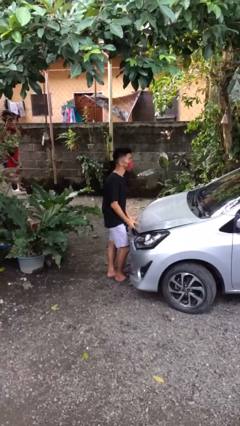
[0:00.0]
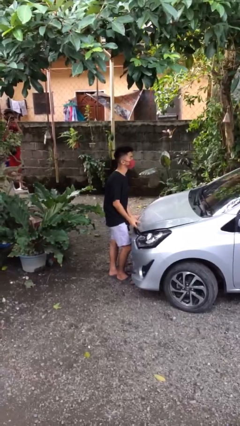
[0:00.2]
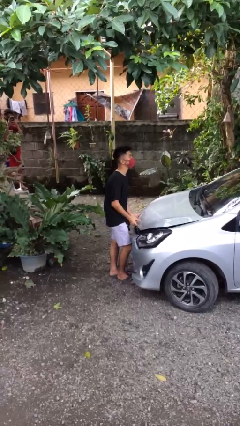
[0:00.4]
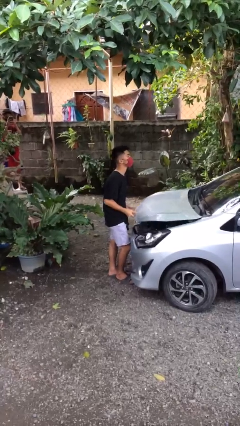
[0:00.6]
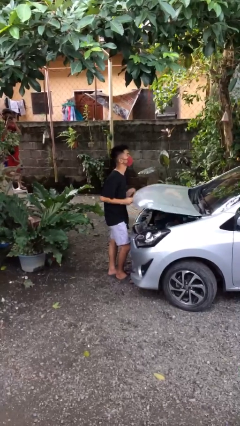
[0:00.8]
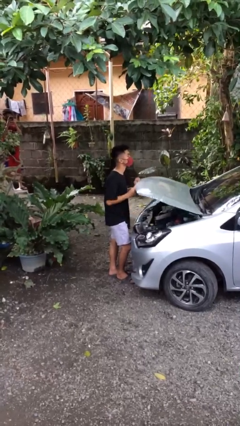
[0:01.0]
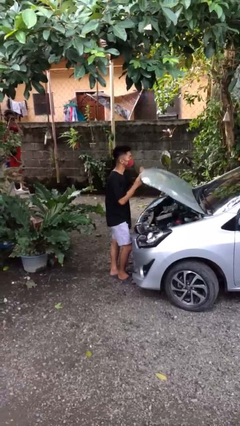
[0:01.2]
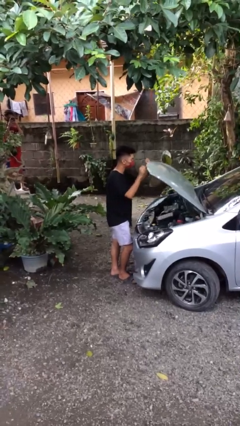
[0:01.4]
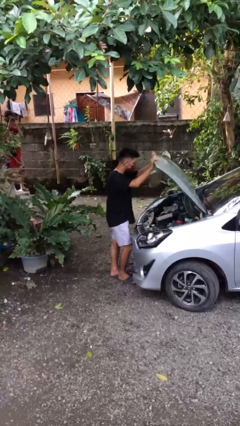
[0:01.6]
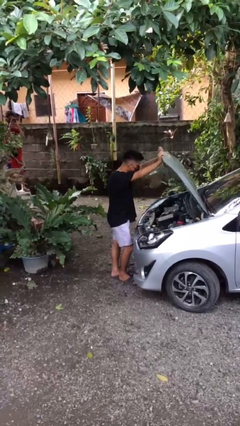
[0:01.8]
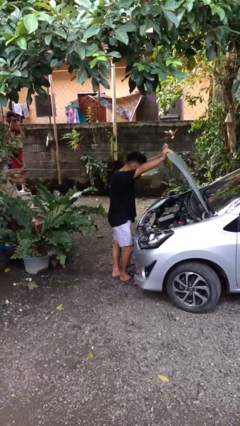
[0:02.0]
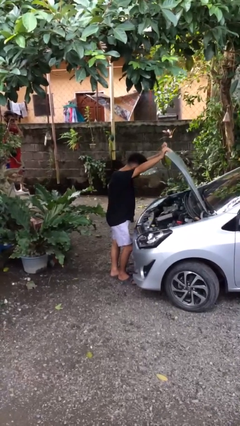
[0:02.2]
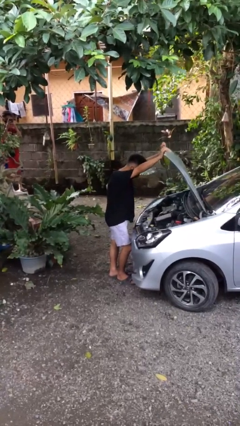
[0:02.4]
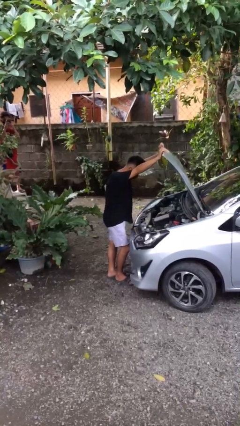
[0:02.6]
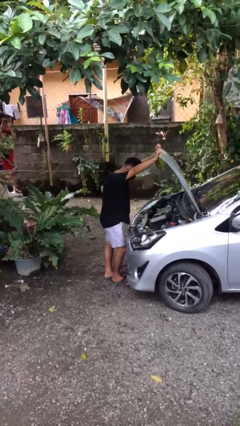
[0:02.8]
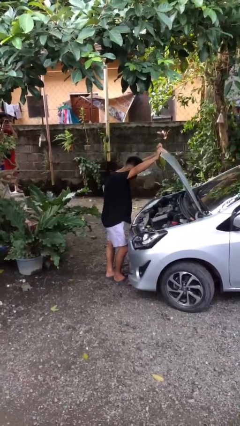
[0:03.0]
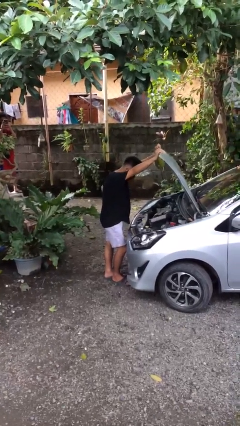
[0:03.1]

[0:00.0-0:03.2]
person opens car hood

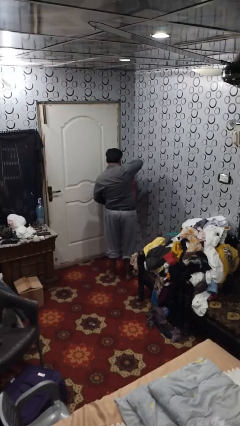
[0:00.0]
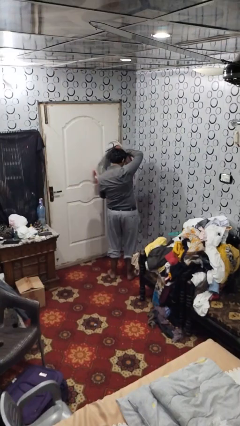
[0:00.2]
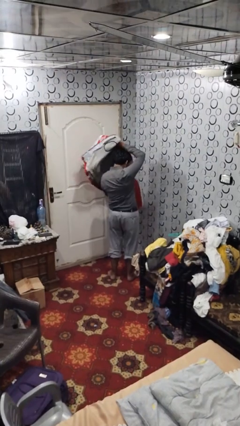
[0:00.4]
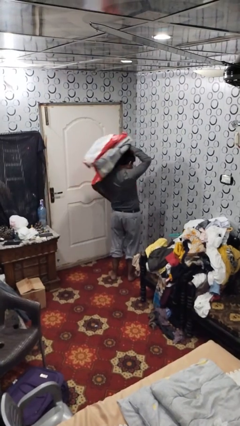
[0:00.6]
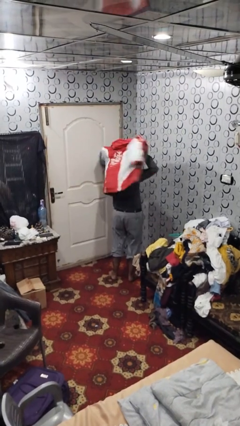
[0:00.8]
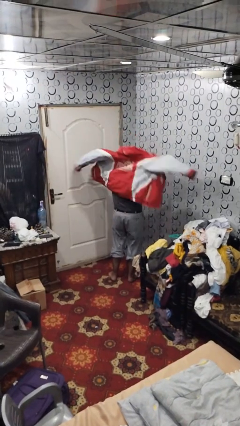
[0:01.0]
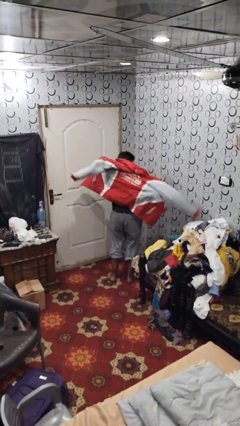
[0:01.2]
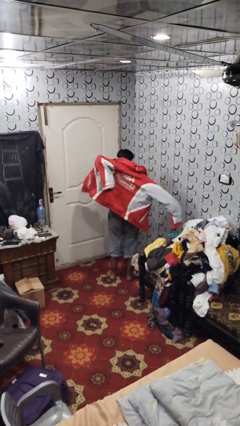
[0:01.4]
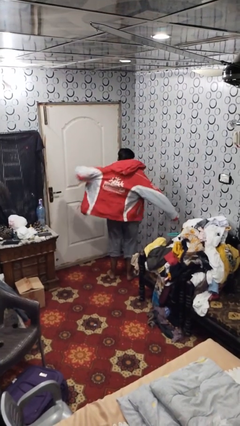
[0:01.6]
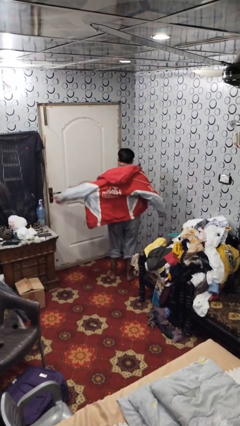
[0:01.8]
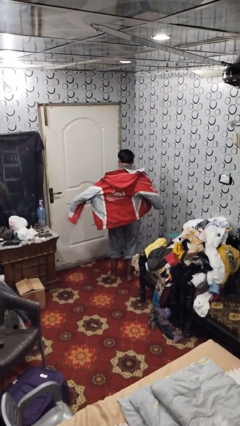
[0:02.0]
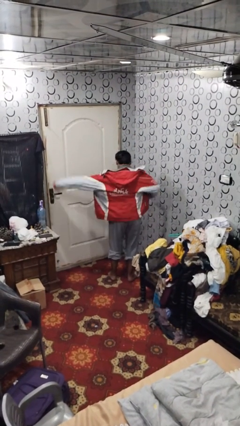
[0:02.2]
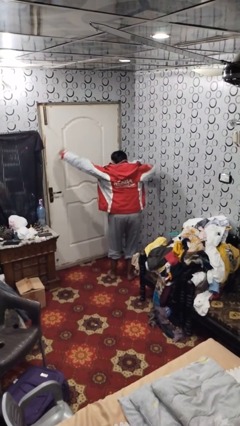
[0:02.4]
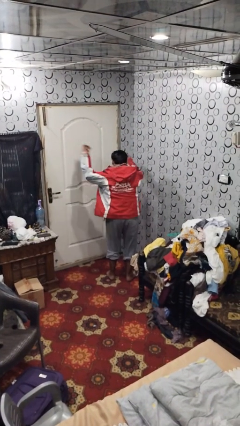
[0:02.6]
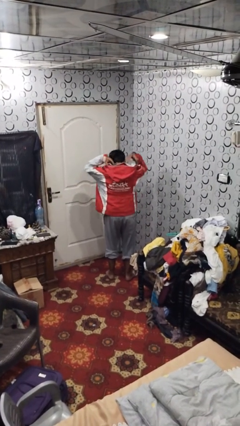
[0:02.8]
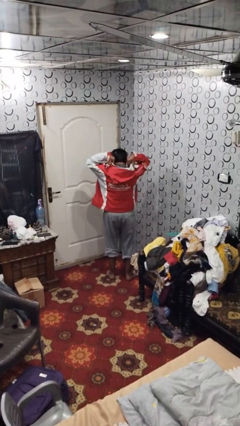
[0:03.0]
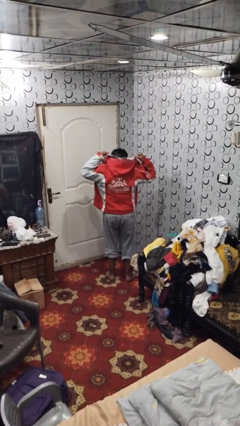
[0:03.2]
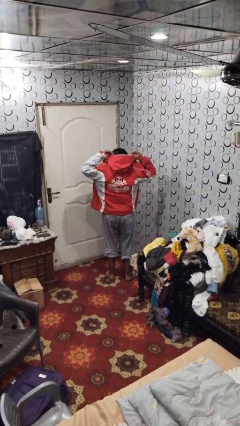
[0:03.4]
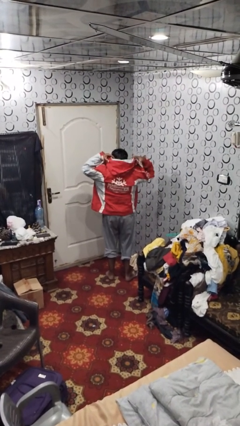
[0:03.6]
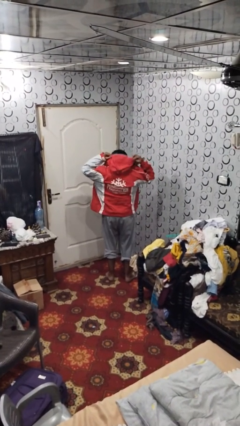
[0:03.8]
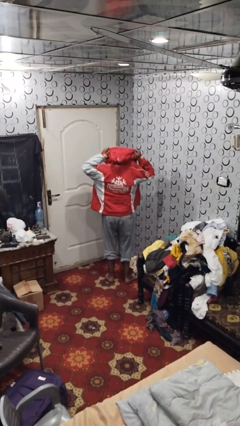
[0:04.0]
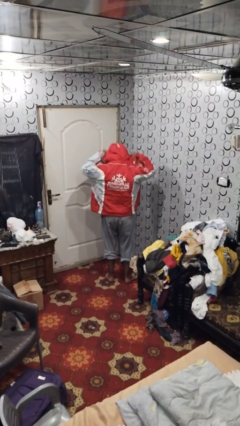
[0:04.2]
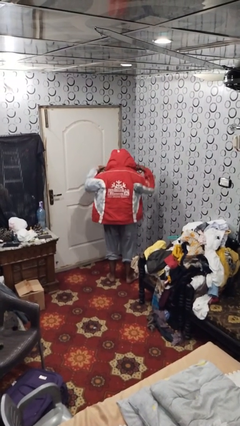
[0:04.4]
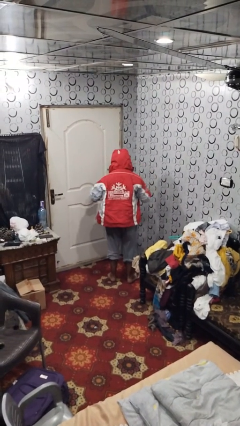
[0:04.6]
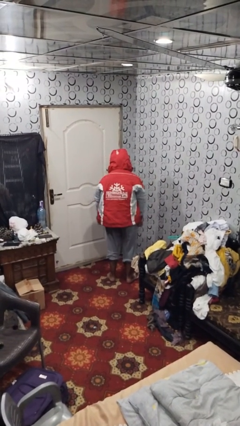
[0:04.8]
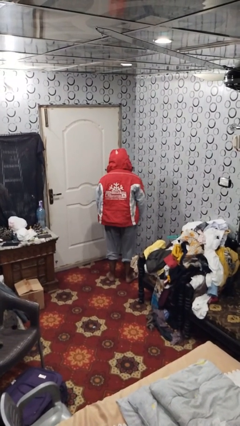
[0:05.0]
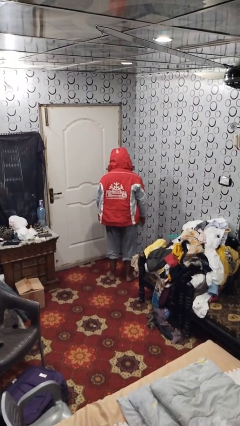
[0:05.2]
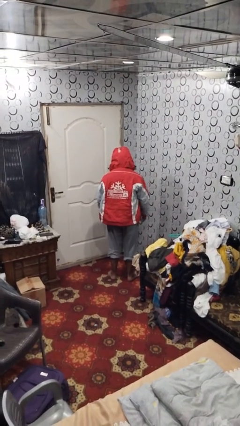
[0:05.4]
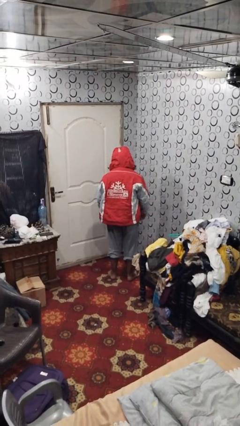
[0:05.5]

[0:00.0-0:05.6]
person puts on hoodie

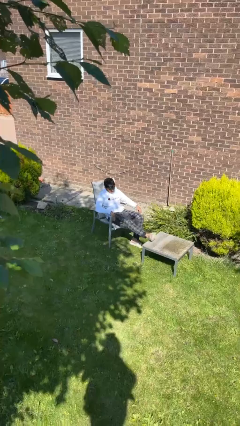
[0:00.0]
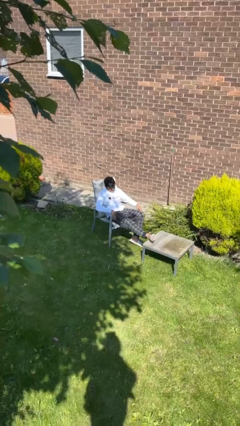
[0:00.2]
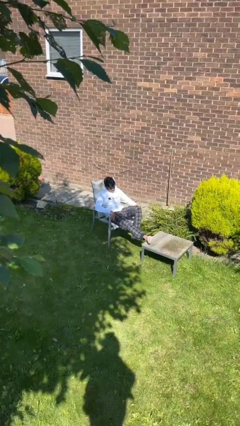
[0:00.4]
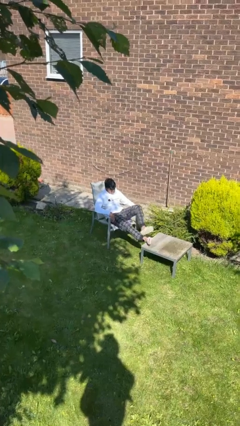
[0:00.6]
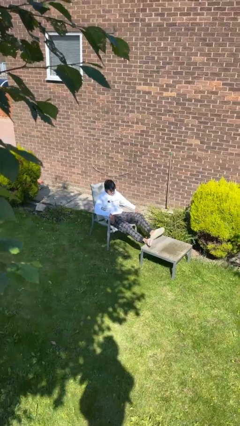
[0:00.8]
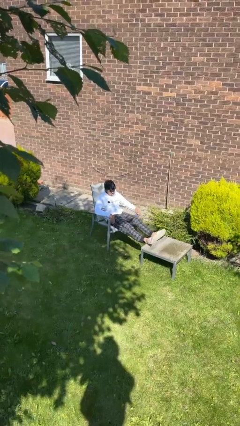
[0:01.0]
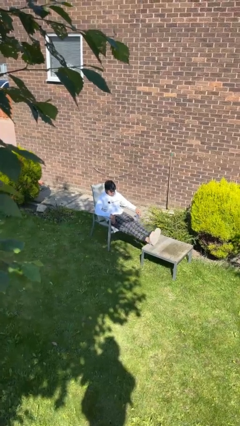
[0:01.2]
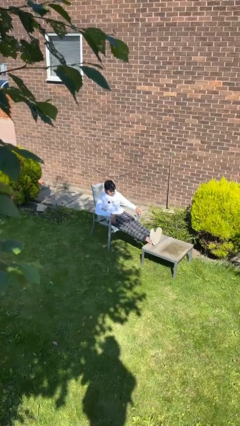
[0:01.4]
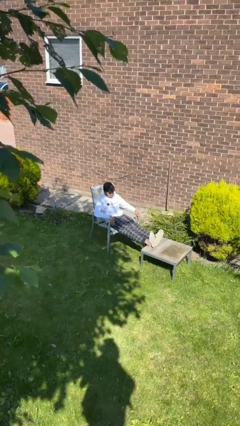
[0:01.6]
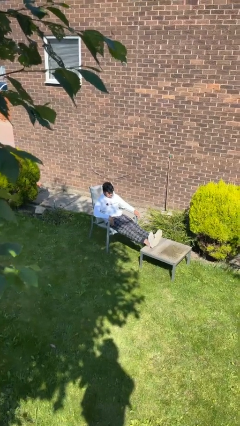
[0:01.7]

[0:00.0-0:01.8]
person puts feet up

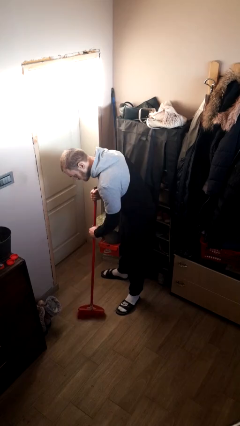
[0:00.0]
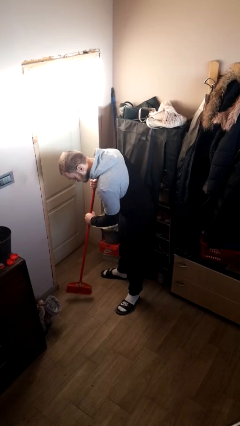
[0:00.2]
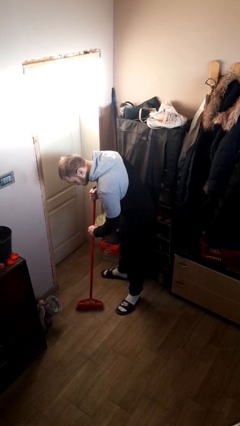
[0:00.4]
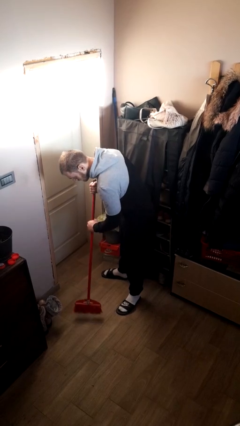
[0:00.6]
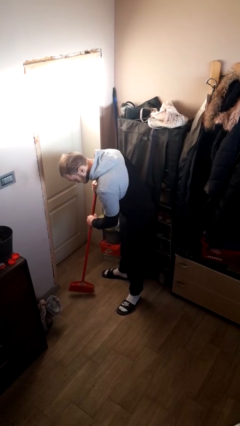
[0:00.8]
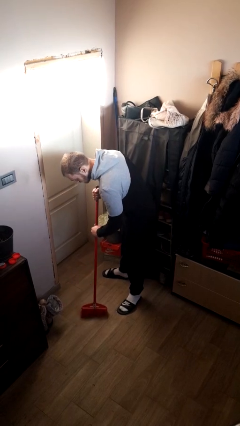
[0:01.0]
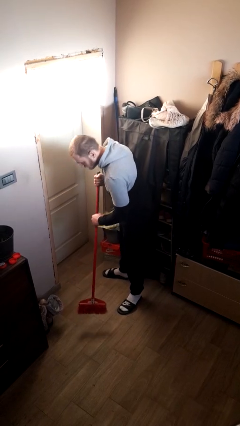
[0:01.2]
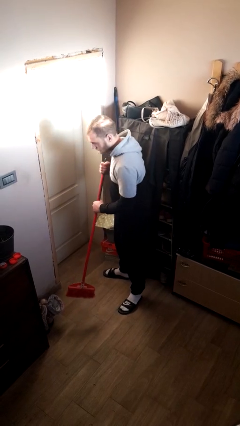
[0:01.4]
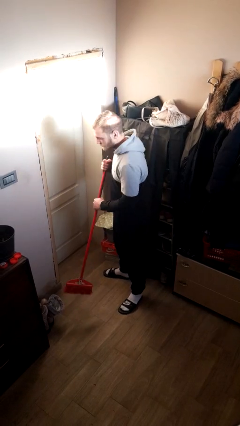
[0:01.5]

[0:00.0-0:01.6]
person sweeps floor

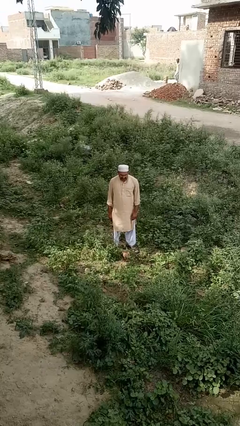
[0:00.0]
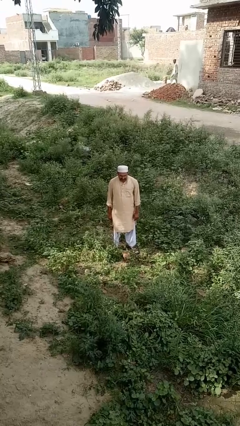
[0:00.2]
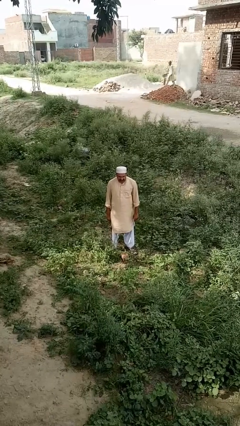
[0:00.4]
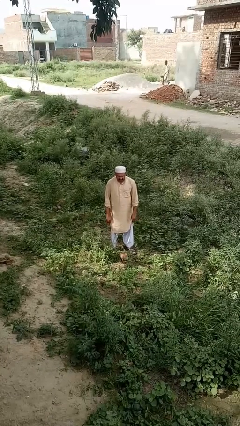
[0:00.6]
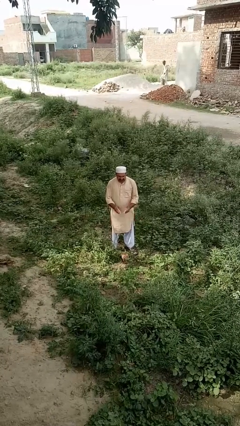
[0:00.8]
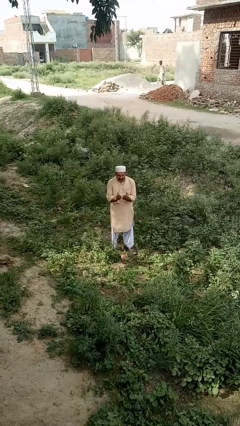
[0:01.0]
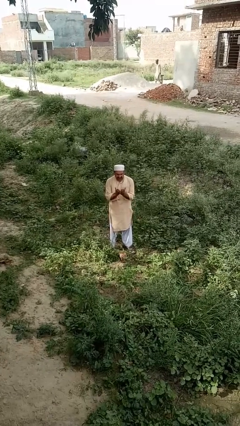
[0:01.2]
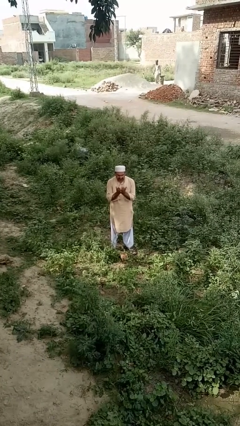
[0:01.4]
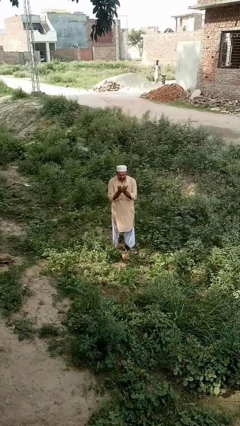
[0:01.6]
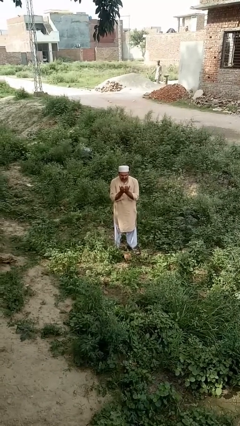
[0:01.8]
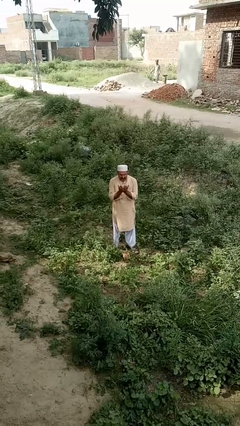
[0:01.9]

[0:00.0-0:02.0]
person prays

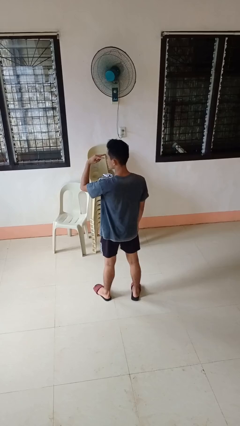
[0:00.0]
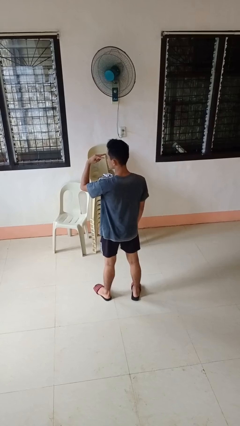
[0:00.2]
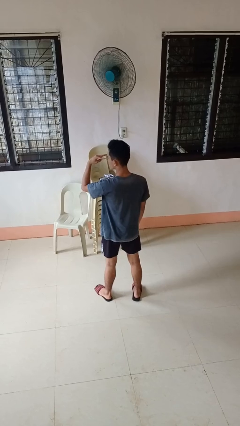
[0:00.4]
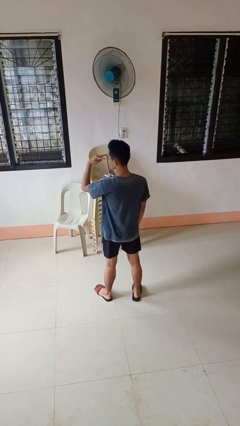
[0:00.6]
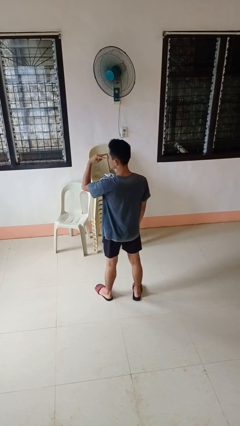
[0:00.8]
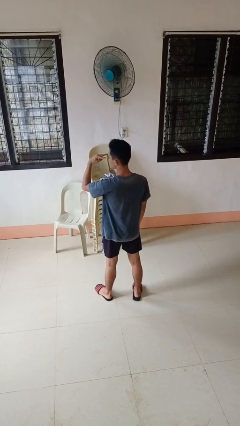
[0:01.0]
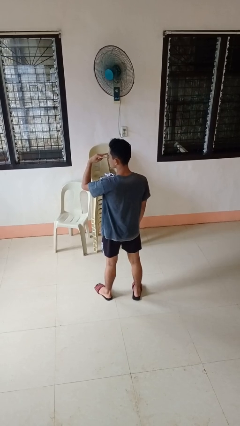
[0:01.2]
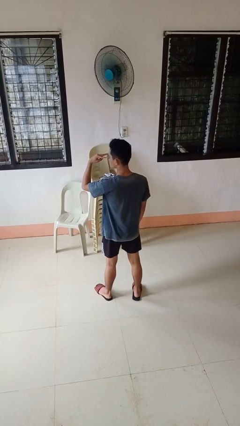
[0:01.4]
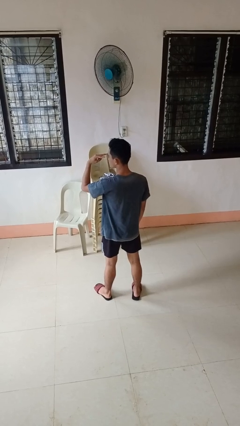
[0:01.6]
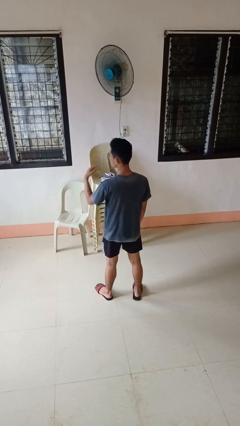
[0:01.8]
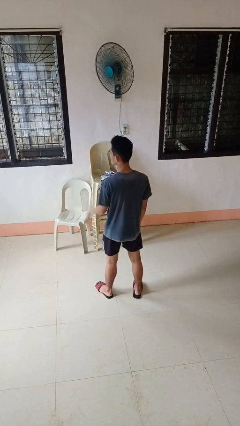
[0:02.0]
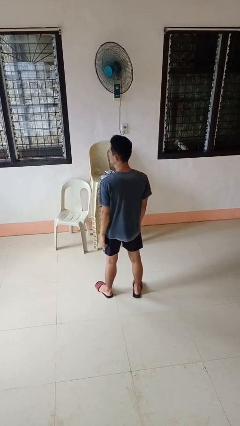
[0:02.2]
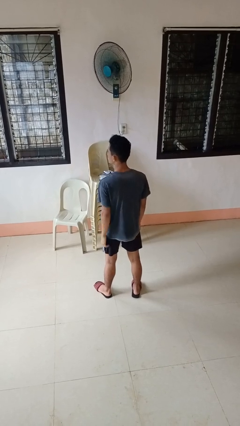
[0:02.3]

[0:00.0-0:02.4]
person gestures watch closely

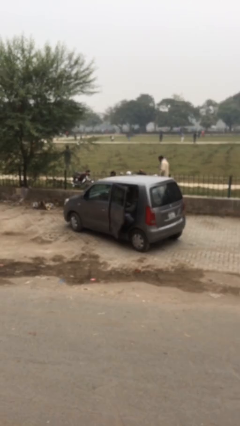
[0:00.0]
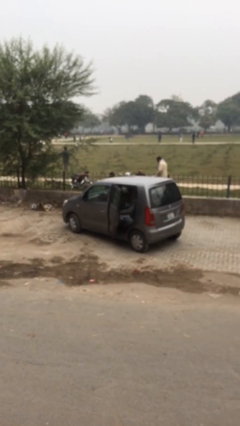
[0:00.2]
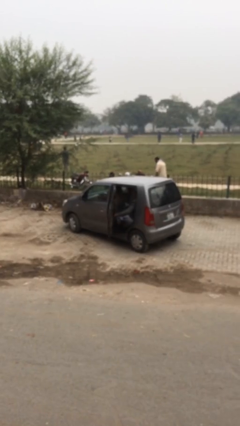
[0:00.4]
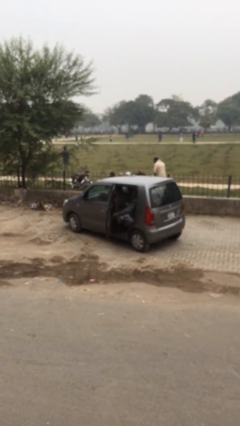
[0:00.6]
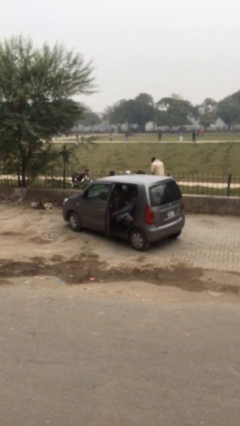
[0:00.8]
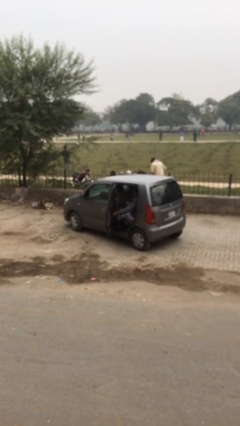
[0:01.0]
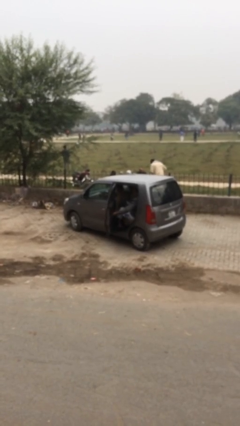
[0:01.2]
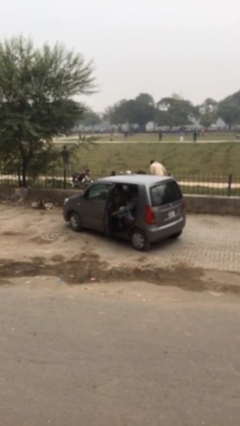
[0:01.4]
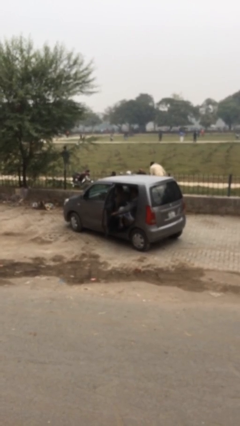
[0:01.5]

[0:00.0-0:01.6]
person opens car door
